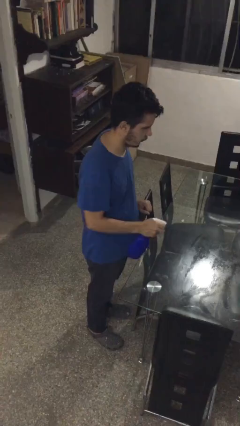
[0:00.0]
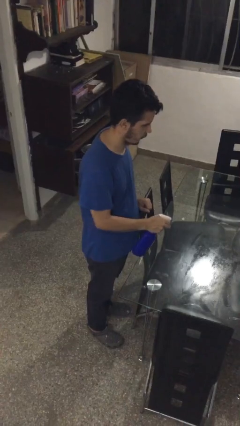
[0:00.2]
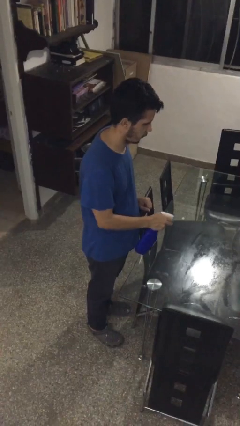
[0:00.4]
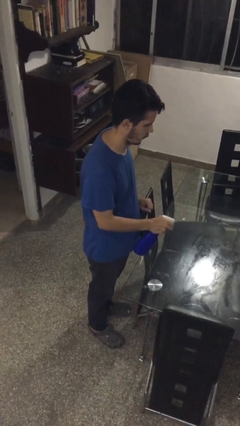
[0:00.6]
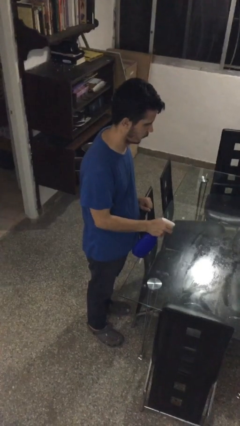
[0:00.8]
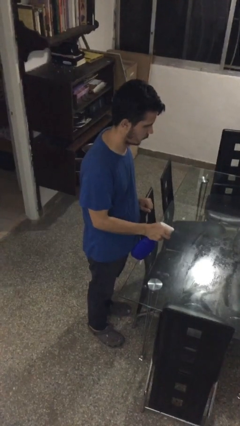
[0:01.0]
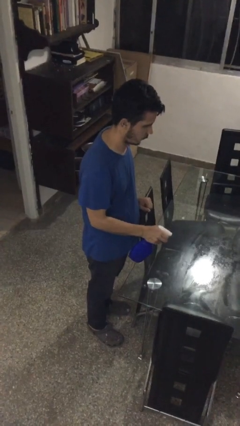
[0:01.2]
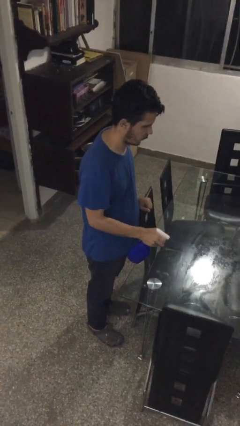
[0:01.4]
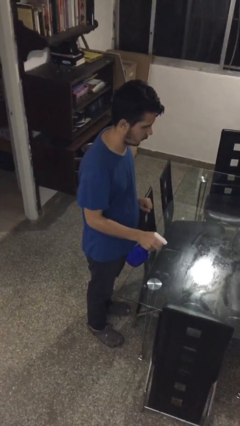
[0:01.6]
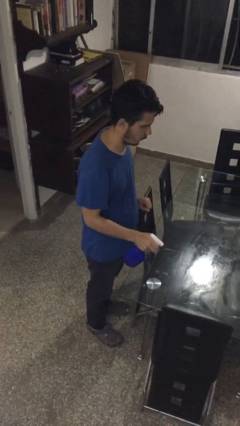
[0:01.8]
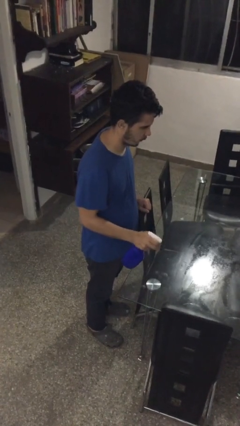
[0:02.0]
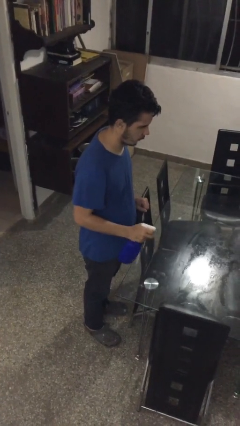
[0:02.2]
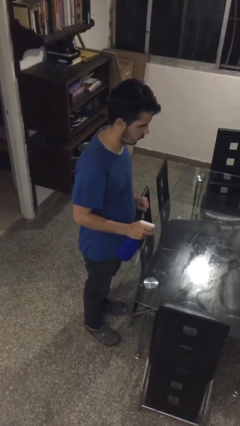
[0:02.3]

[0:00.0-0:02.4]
person sprays from bottle

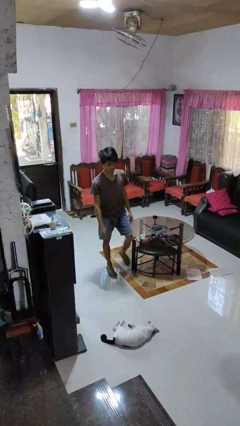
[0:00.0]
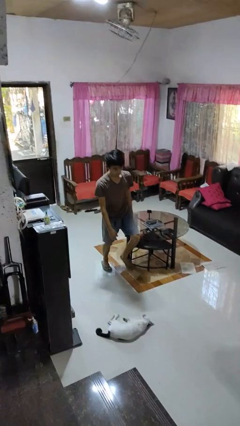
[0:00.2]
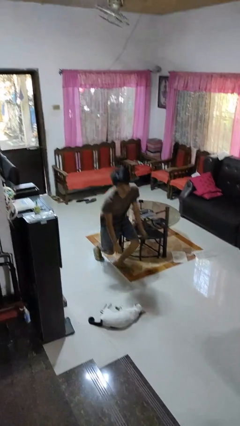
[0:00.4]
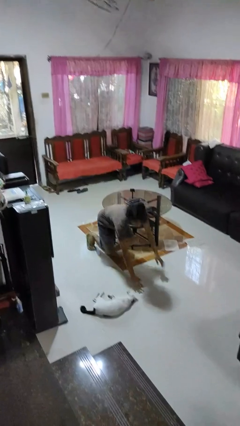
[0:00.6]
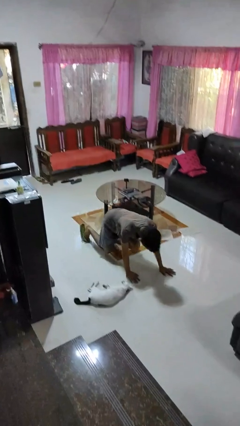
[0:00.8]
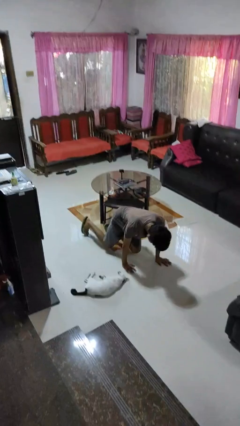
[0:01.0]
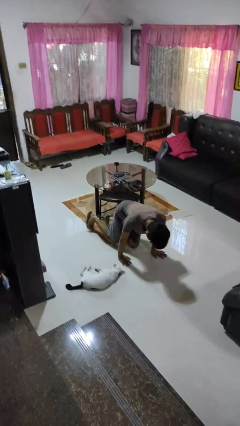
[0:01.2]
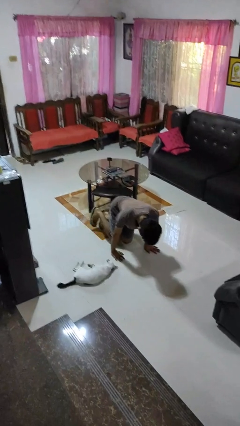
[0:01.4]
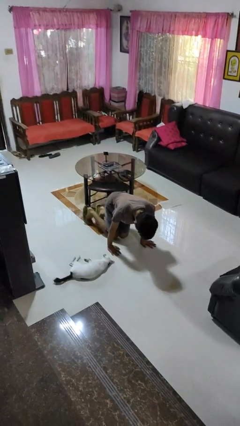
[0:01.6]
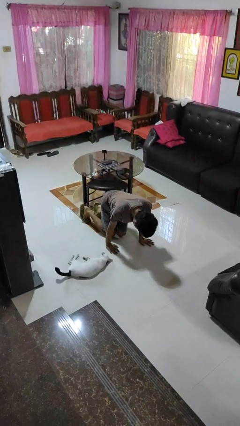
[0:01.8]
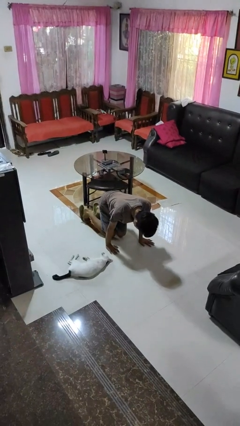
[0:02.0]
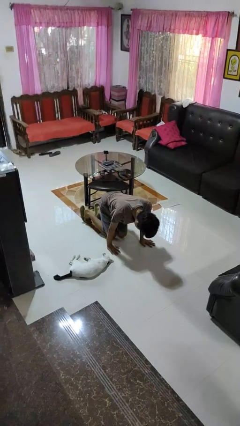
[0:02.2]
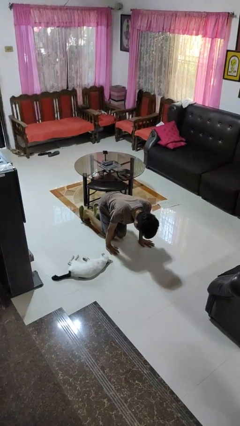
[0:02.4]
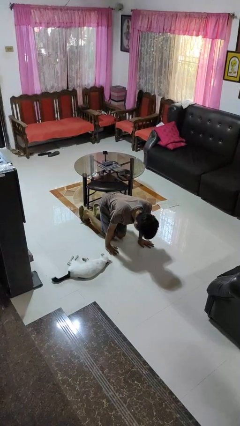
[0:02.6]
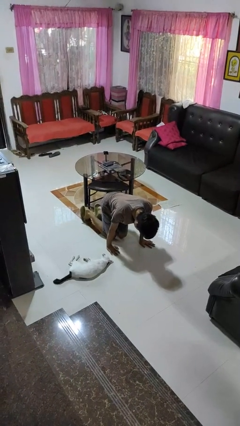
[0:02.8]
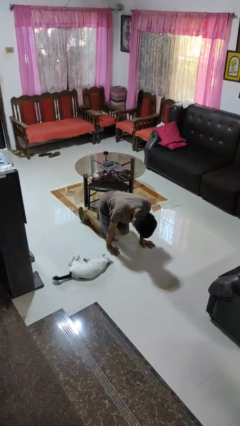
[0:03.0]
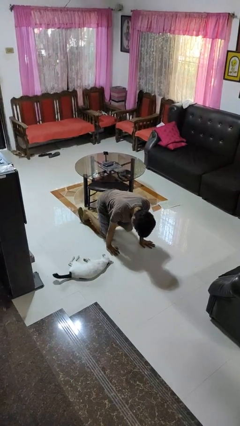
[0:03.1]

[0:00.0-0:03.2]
person trips on object on floor

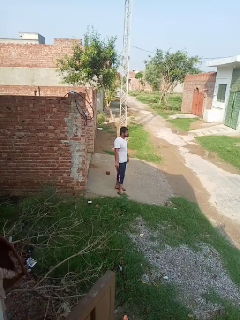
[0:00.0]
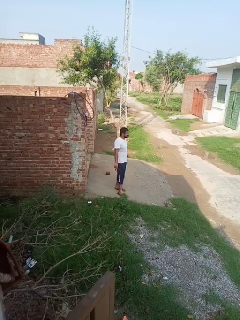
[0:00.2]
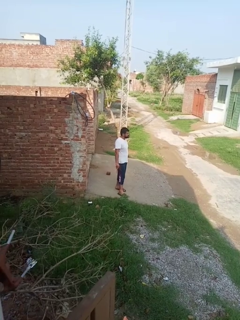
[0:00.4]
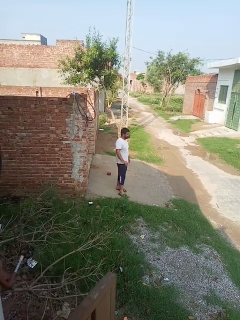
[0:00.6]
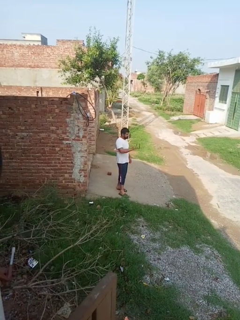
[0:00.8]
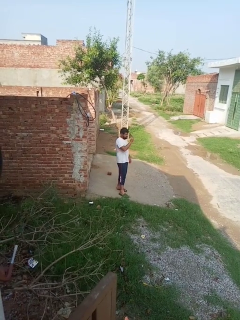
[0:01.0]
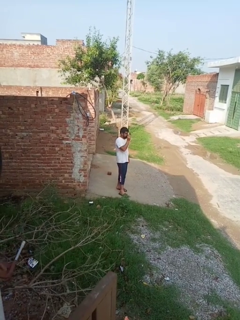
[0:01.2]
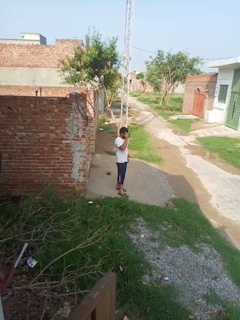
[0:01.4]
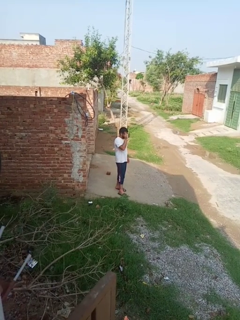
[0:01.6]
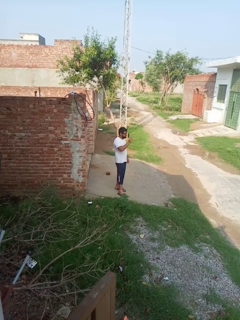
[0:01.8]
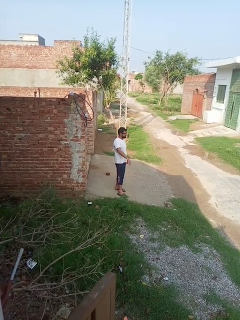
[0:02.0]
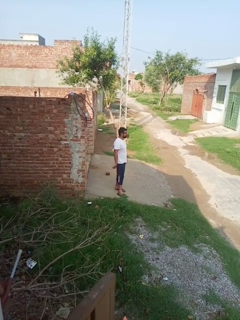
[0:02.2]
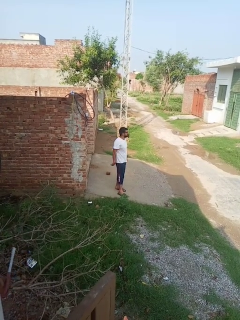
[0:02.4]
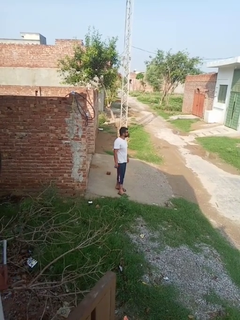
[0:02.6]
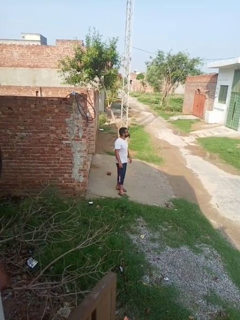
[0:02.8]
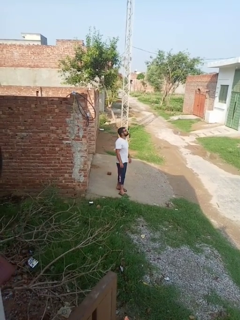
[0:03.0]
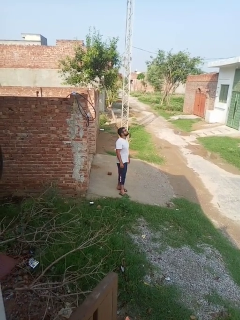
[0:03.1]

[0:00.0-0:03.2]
person puts on glasses

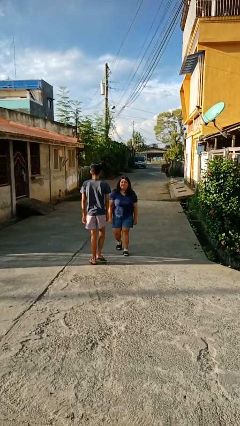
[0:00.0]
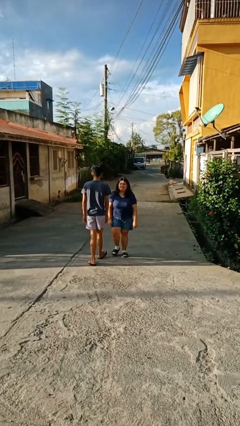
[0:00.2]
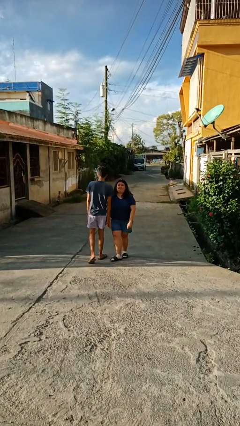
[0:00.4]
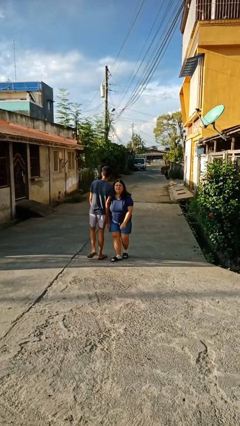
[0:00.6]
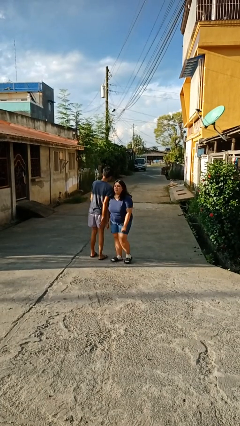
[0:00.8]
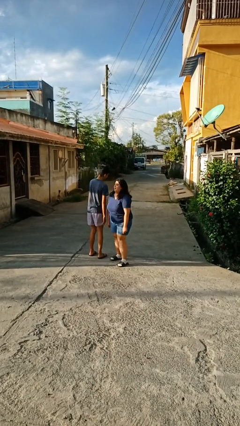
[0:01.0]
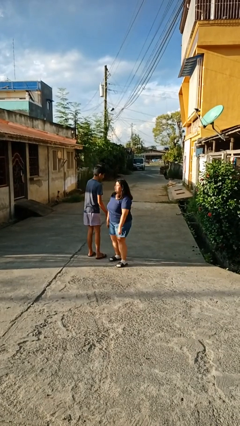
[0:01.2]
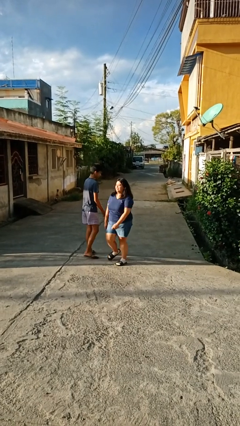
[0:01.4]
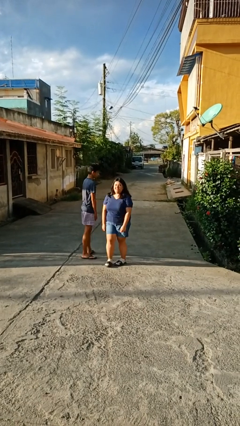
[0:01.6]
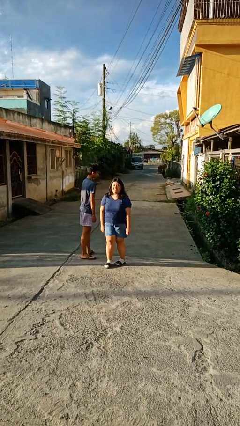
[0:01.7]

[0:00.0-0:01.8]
person bumps into person

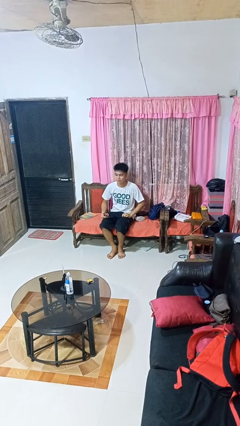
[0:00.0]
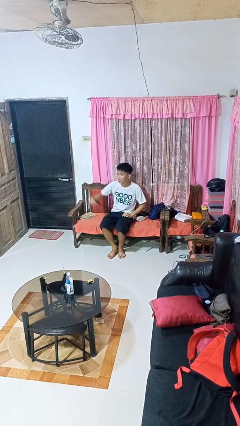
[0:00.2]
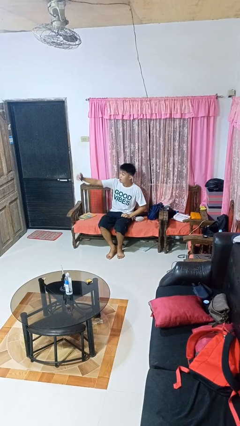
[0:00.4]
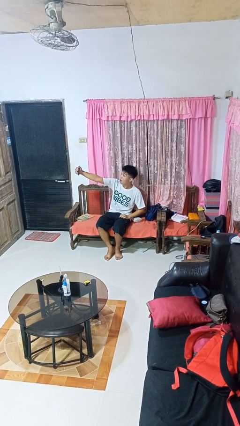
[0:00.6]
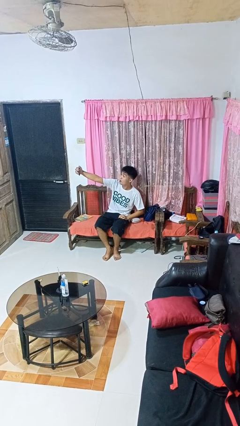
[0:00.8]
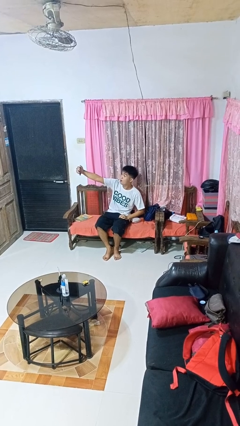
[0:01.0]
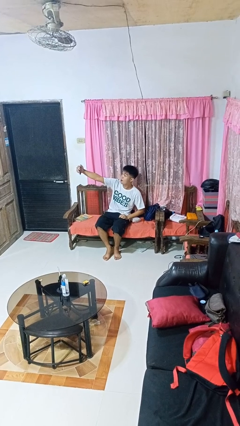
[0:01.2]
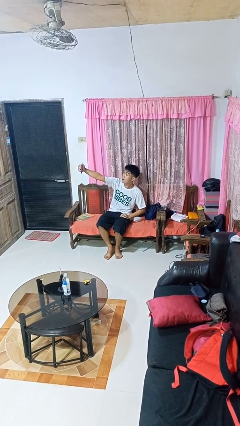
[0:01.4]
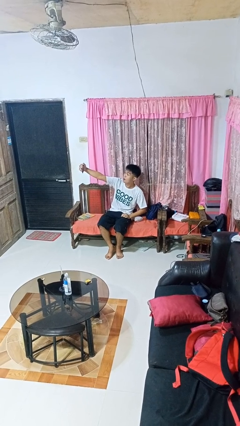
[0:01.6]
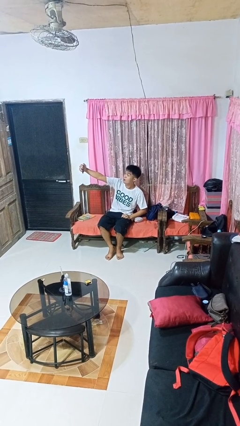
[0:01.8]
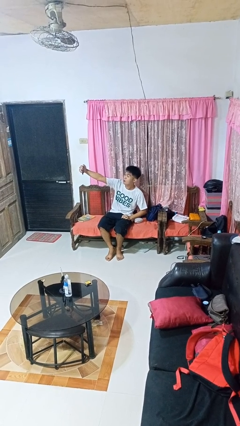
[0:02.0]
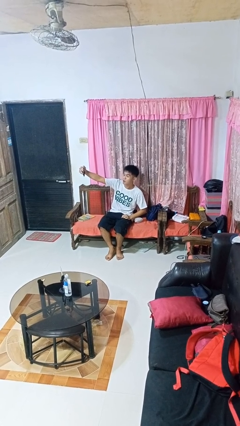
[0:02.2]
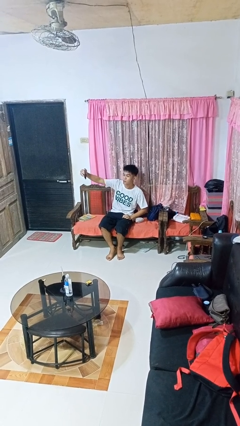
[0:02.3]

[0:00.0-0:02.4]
person takes selfie

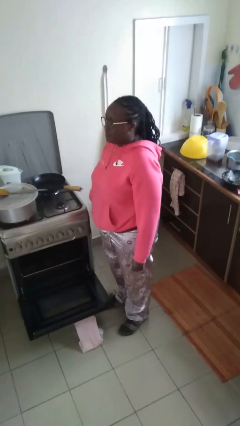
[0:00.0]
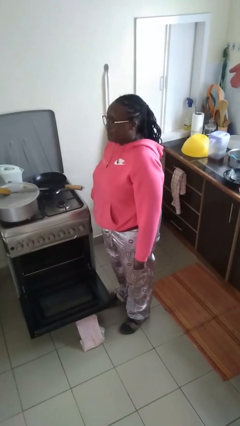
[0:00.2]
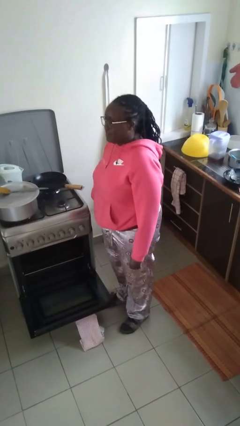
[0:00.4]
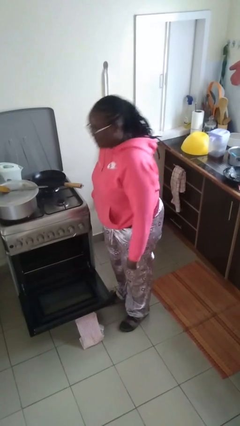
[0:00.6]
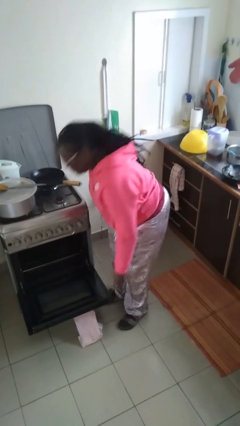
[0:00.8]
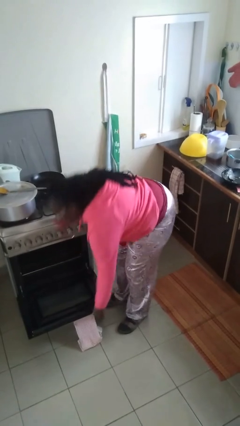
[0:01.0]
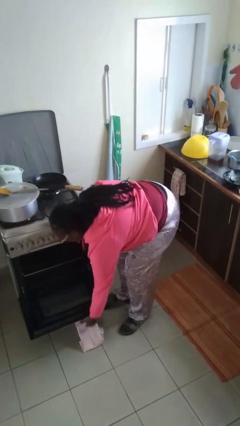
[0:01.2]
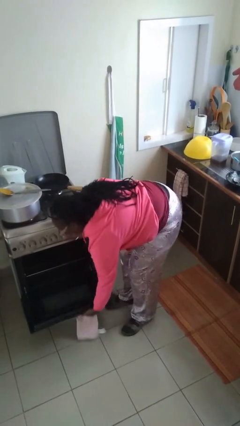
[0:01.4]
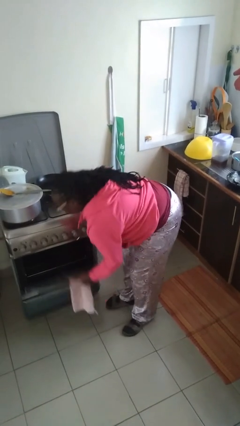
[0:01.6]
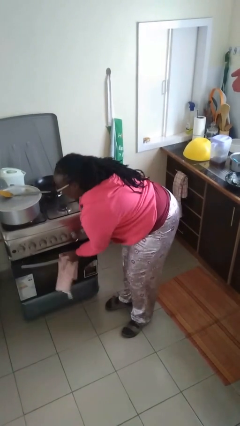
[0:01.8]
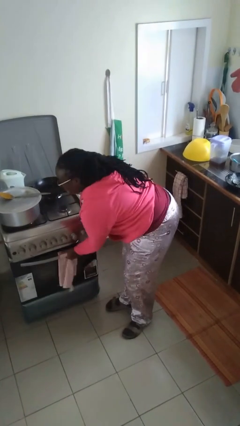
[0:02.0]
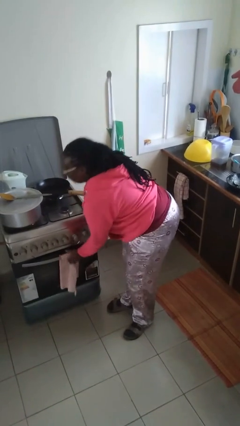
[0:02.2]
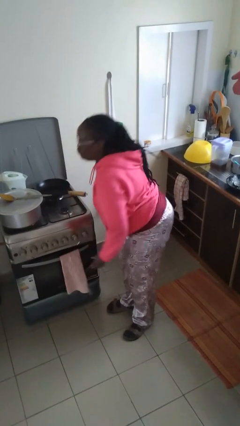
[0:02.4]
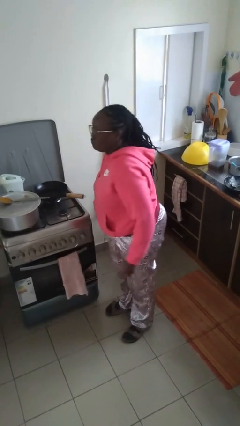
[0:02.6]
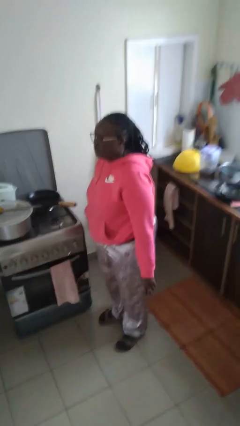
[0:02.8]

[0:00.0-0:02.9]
person closes oven door

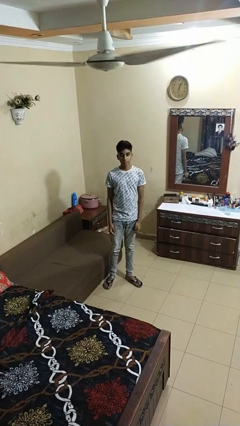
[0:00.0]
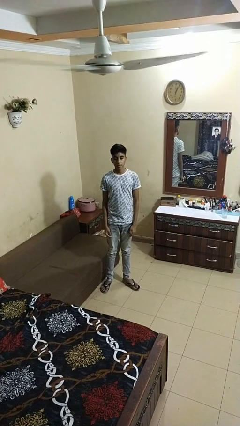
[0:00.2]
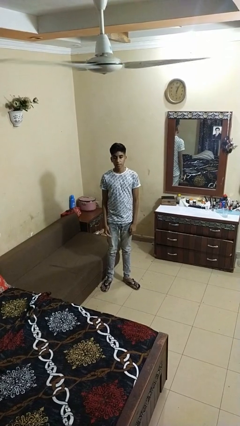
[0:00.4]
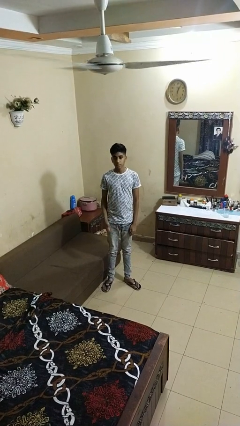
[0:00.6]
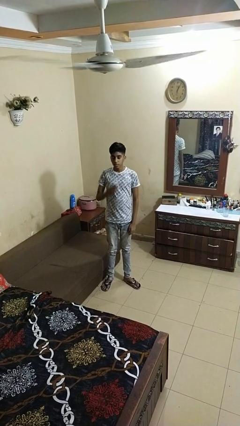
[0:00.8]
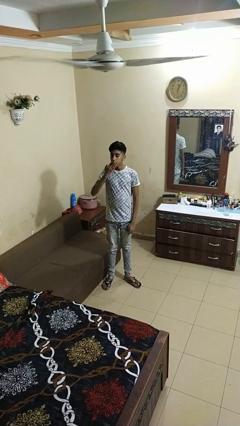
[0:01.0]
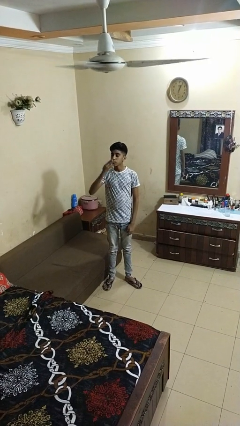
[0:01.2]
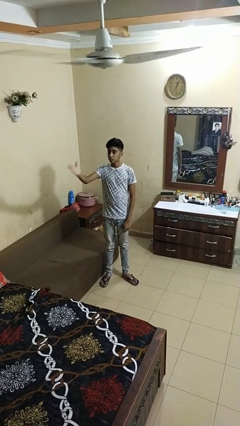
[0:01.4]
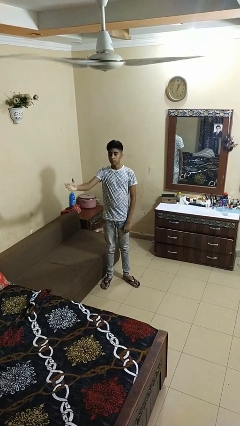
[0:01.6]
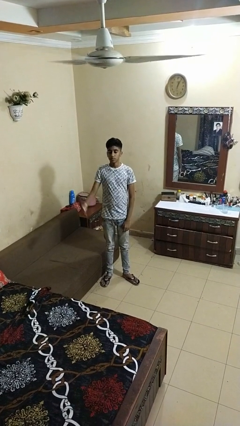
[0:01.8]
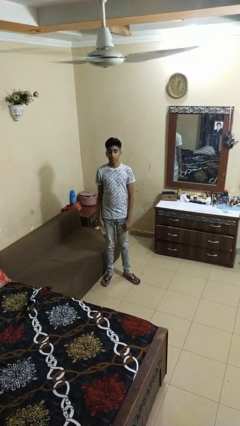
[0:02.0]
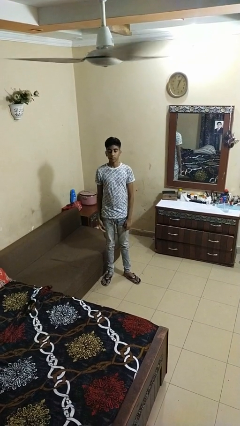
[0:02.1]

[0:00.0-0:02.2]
person gestures blow kiss
